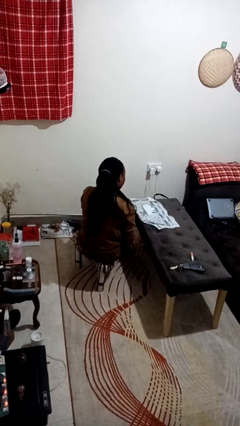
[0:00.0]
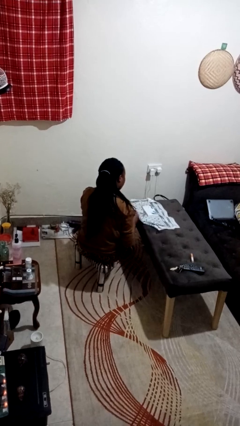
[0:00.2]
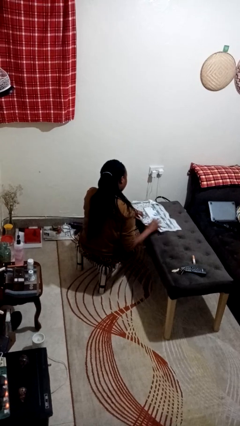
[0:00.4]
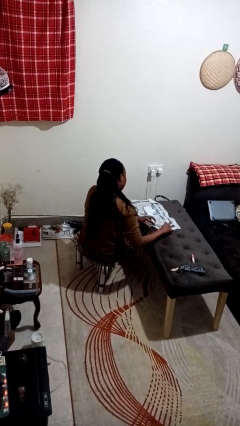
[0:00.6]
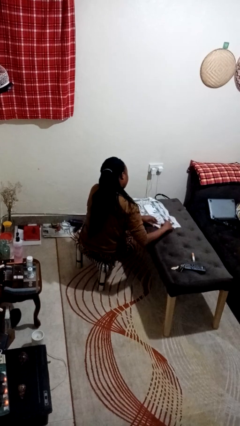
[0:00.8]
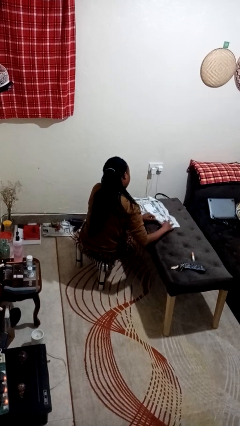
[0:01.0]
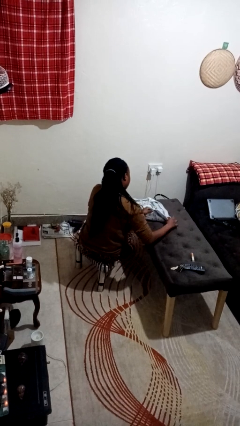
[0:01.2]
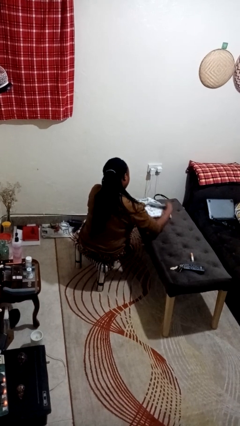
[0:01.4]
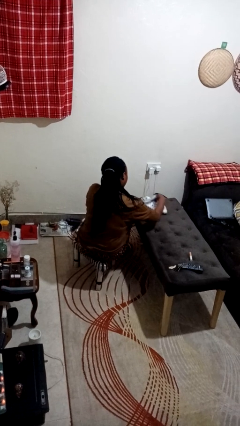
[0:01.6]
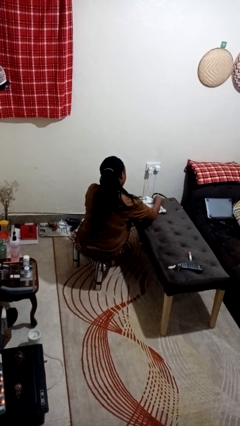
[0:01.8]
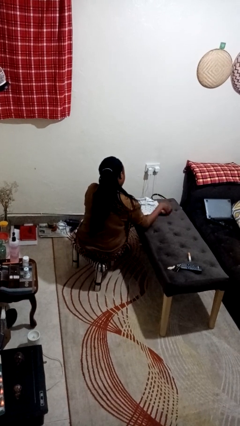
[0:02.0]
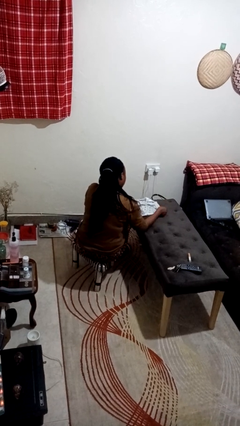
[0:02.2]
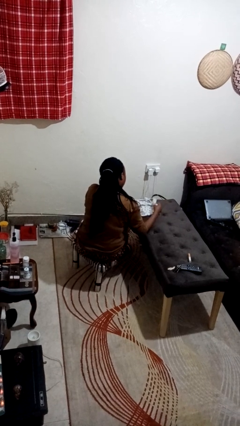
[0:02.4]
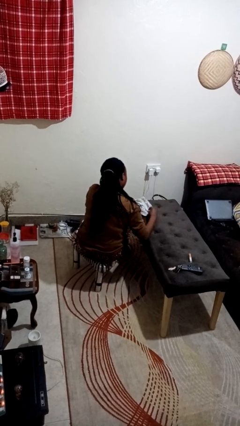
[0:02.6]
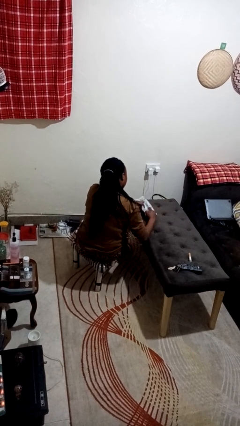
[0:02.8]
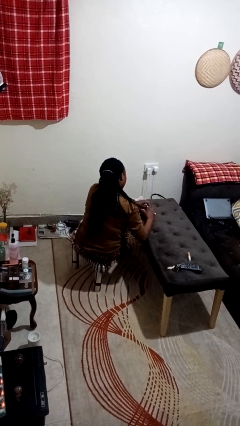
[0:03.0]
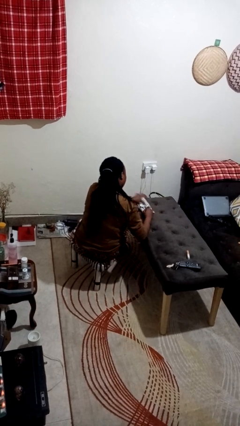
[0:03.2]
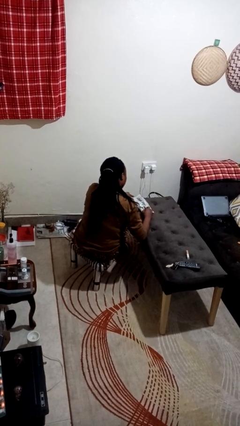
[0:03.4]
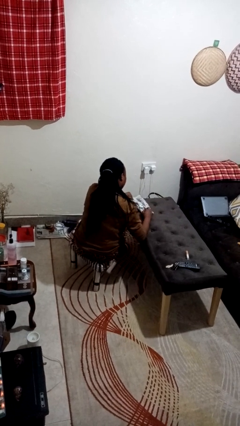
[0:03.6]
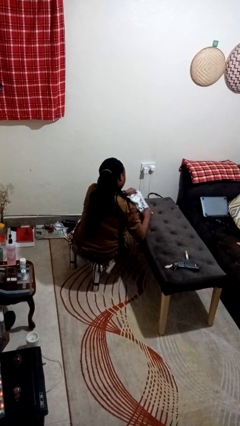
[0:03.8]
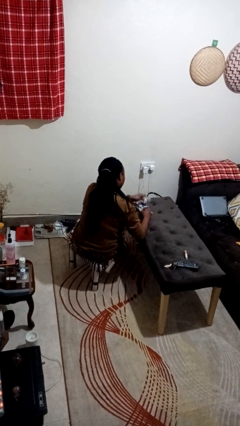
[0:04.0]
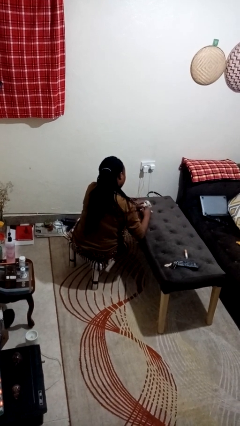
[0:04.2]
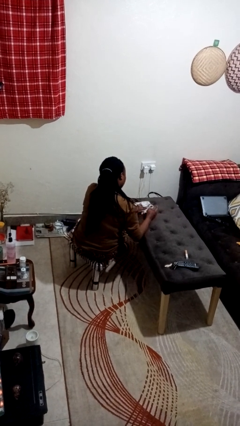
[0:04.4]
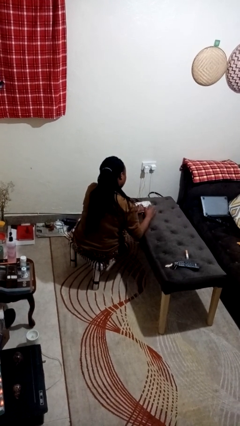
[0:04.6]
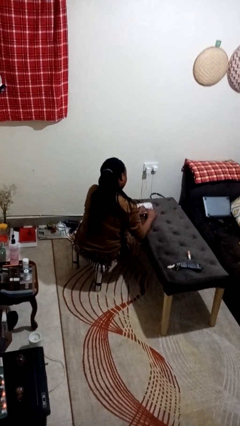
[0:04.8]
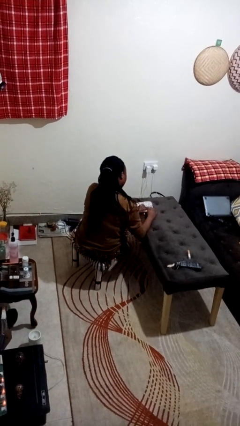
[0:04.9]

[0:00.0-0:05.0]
person wraps box

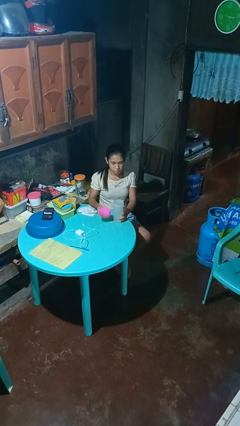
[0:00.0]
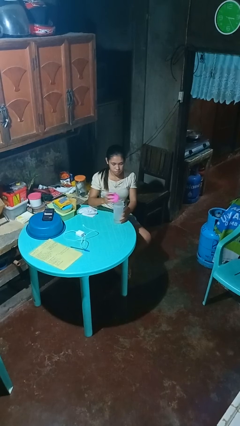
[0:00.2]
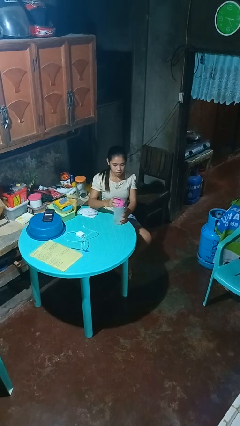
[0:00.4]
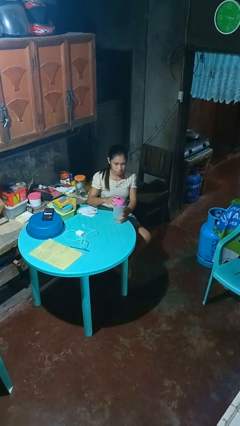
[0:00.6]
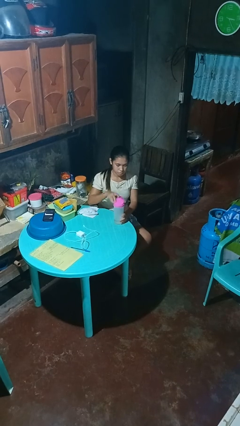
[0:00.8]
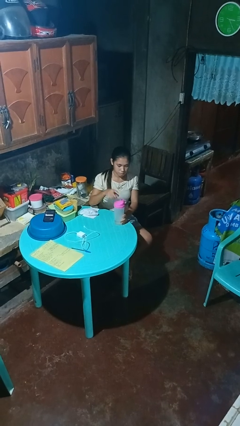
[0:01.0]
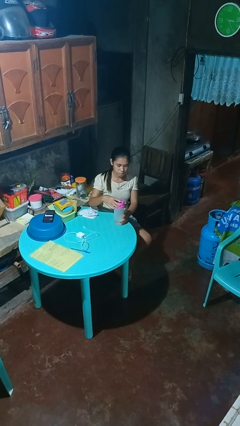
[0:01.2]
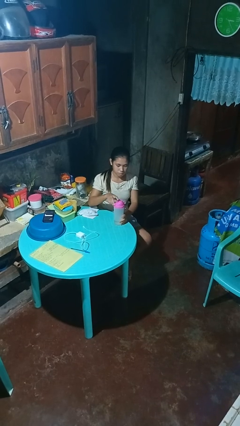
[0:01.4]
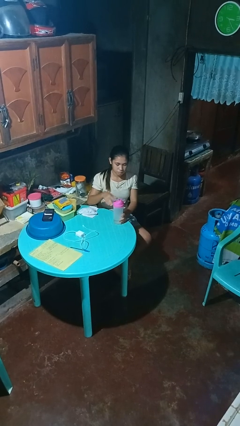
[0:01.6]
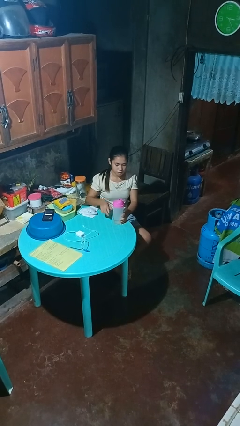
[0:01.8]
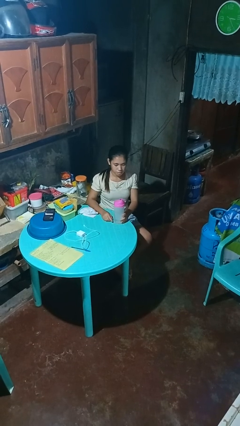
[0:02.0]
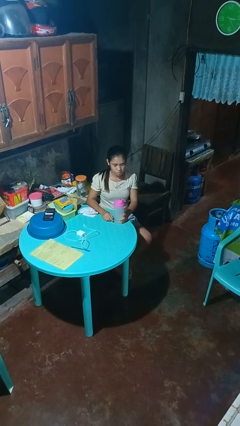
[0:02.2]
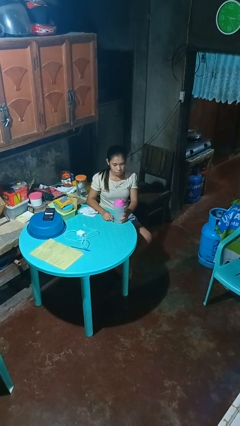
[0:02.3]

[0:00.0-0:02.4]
person screws lid to bottle

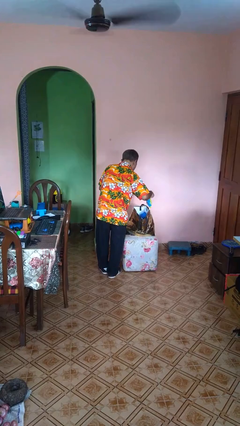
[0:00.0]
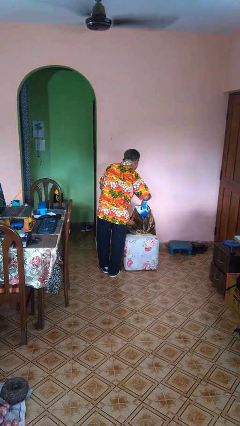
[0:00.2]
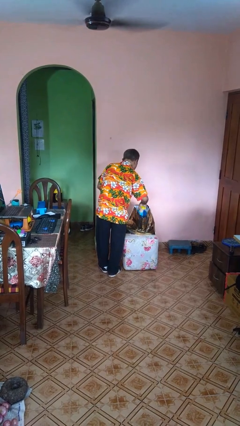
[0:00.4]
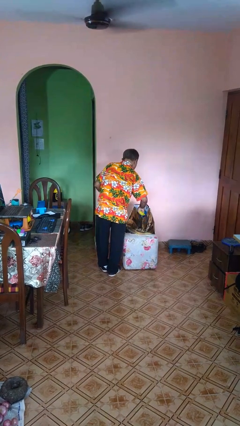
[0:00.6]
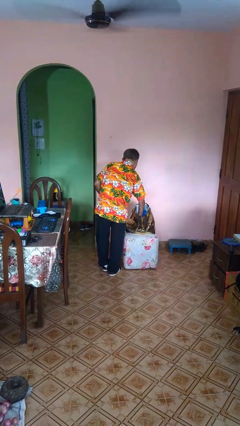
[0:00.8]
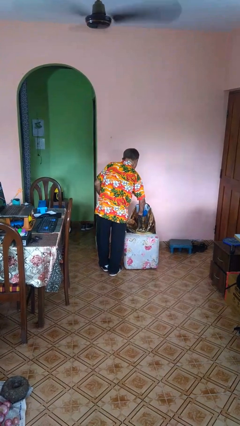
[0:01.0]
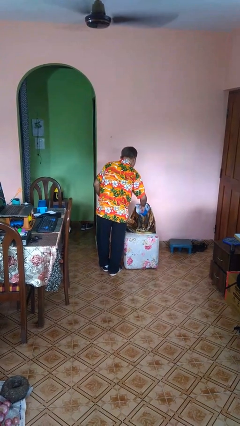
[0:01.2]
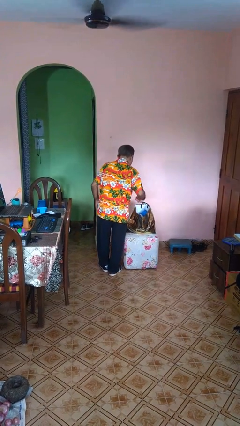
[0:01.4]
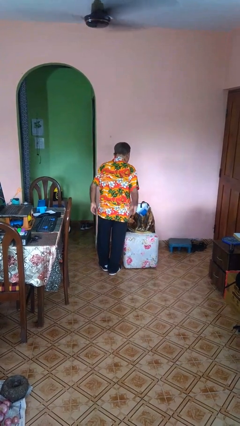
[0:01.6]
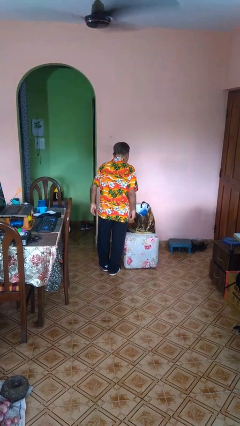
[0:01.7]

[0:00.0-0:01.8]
person puts object into bag

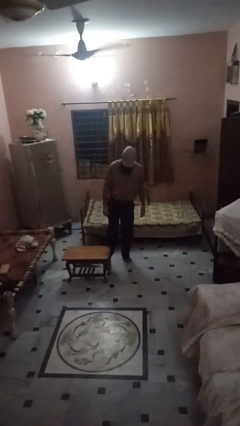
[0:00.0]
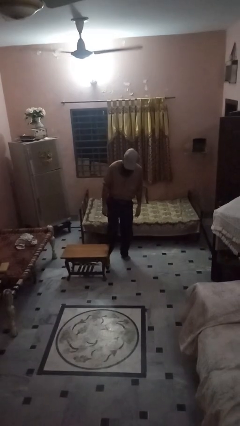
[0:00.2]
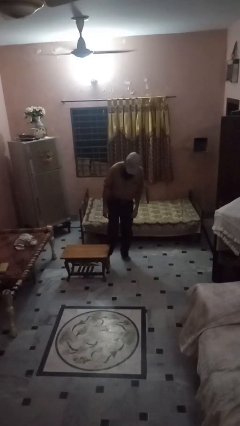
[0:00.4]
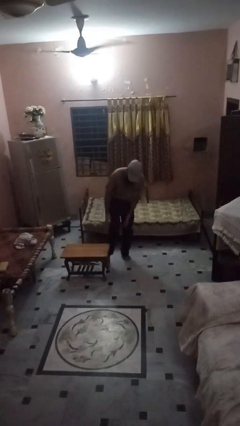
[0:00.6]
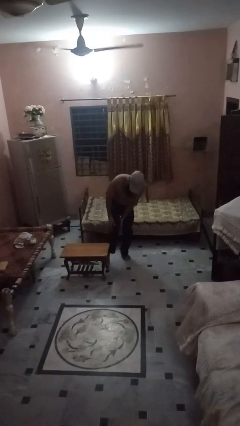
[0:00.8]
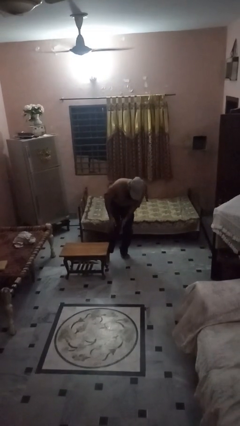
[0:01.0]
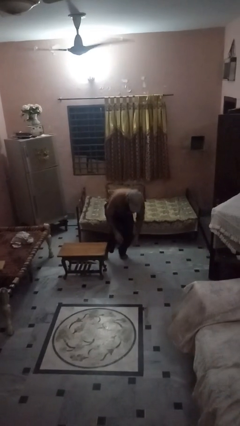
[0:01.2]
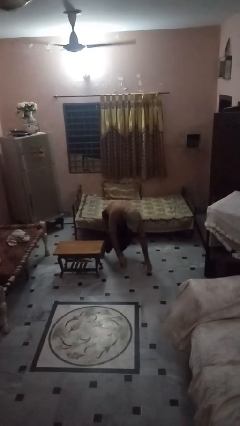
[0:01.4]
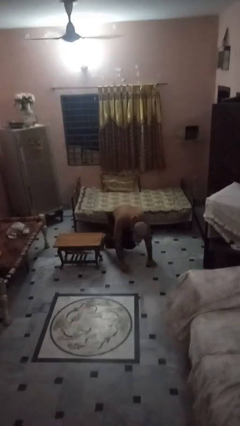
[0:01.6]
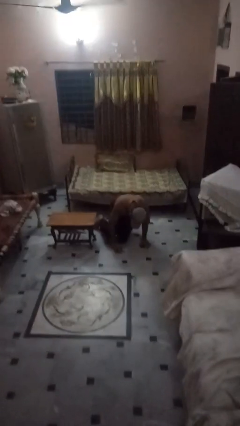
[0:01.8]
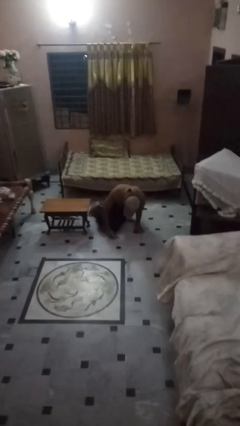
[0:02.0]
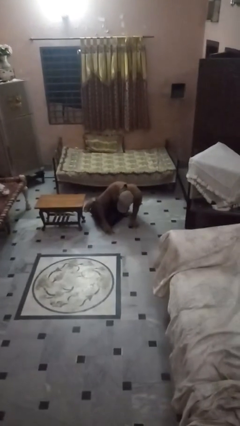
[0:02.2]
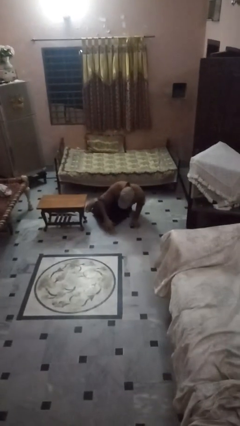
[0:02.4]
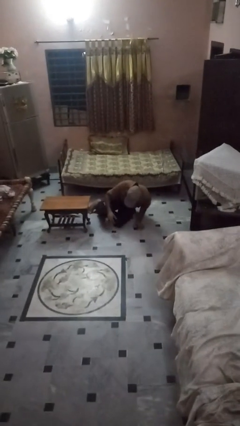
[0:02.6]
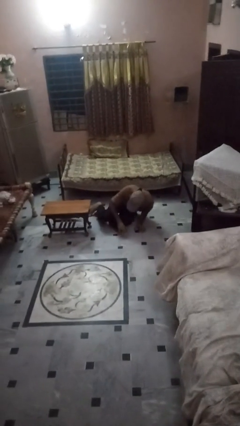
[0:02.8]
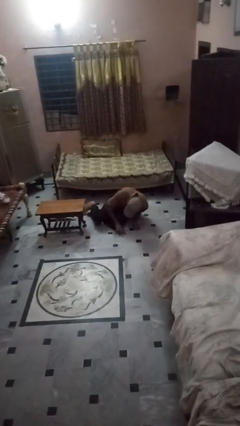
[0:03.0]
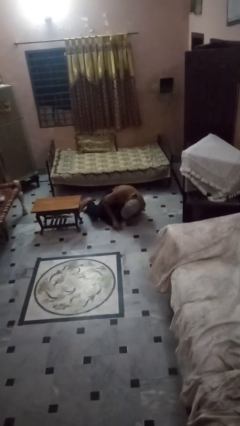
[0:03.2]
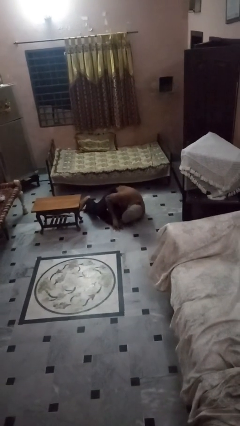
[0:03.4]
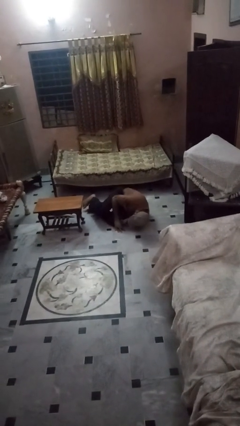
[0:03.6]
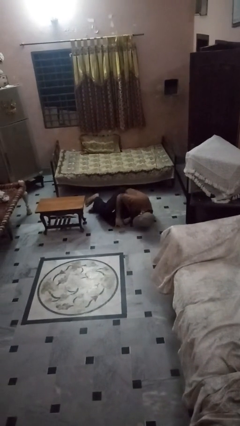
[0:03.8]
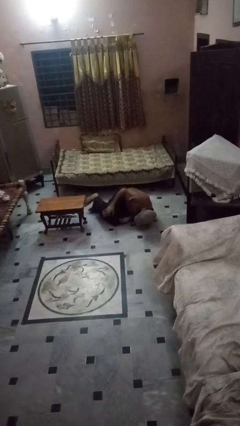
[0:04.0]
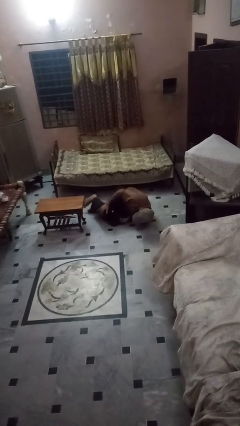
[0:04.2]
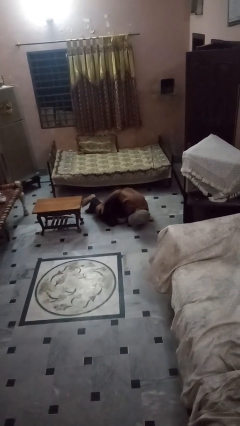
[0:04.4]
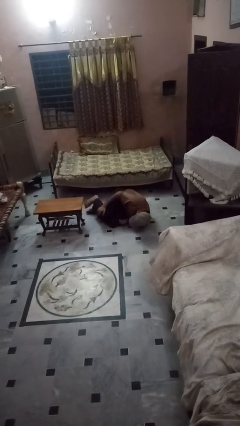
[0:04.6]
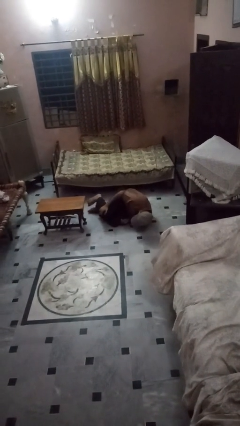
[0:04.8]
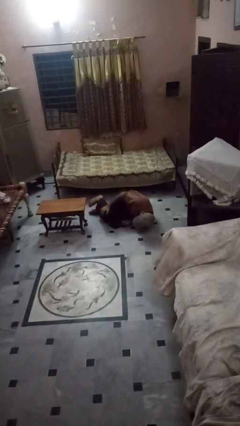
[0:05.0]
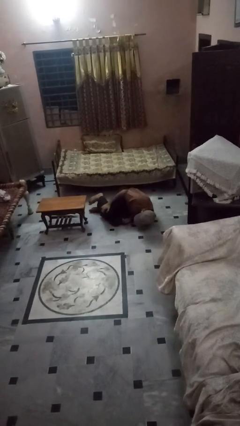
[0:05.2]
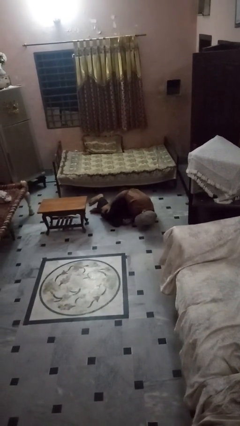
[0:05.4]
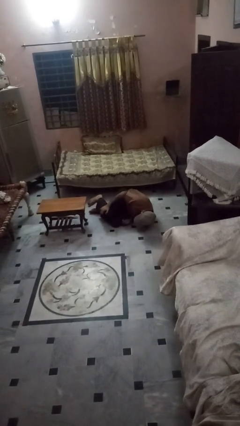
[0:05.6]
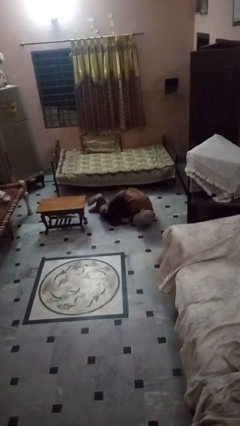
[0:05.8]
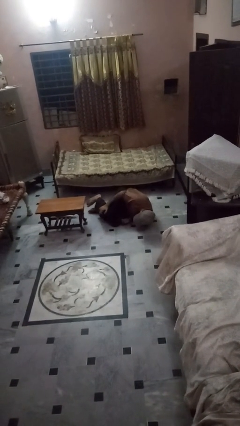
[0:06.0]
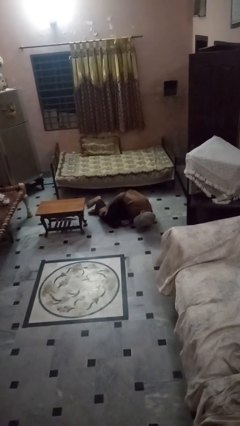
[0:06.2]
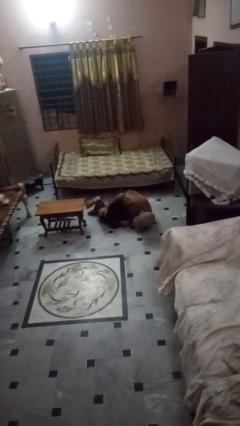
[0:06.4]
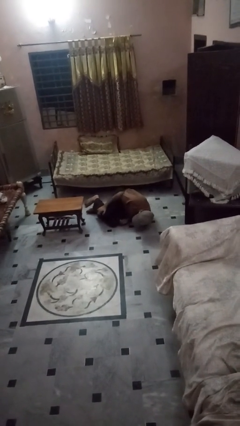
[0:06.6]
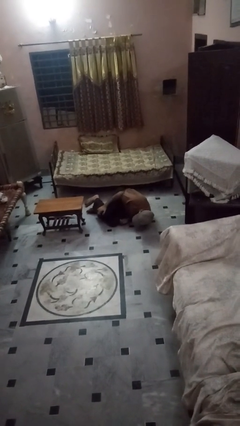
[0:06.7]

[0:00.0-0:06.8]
person lies down on floor

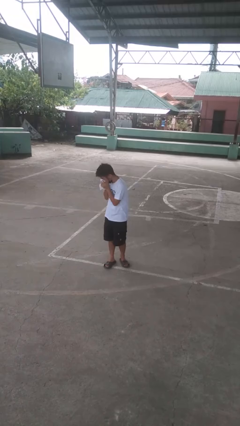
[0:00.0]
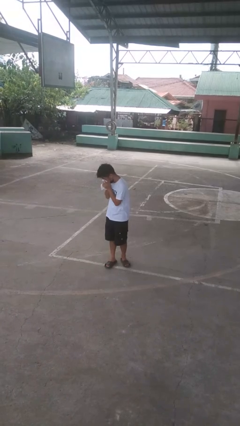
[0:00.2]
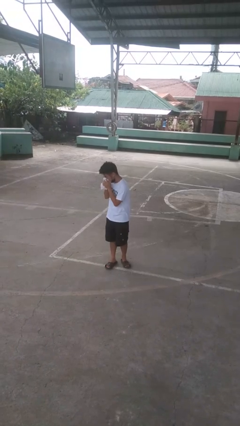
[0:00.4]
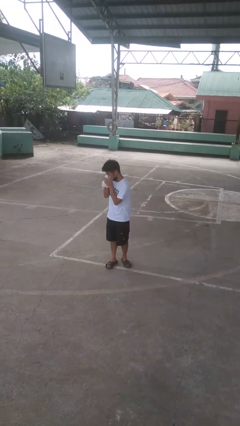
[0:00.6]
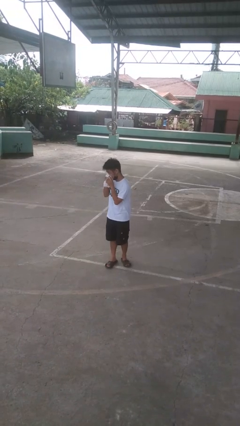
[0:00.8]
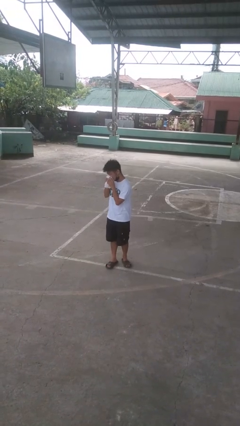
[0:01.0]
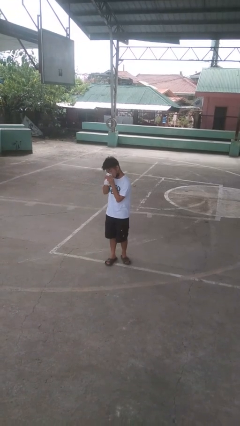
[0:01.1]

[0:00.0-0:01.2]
person blows nose

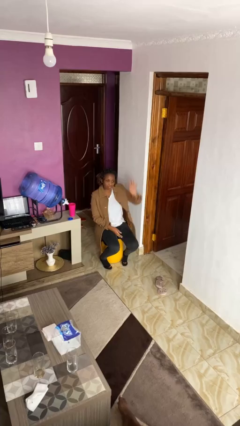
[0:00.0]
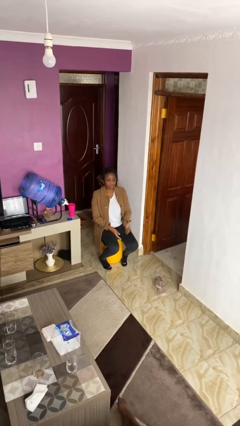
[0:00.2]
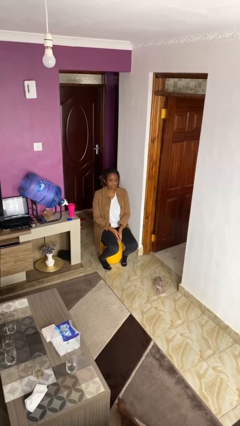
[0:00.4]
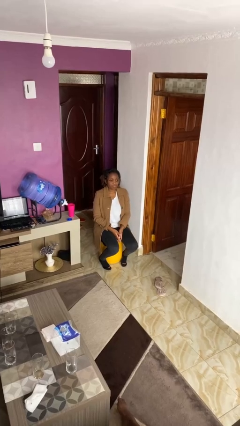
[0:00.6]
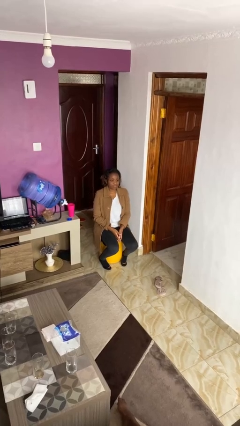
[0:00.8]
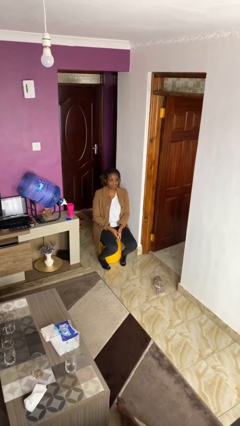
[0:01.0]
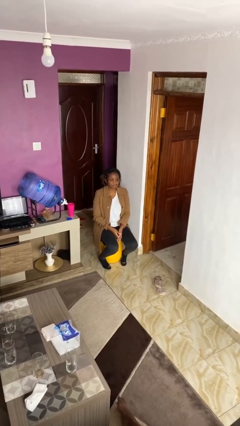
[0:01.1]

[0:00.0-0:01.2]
person gestures lower hand
